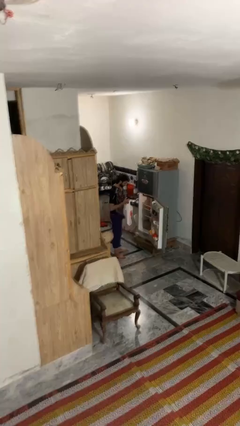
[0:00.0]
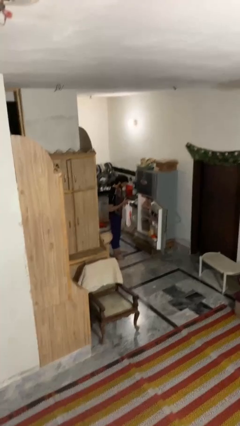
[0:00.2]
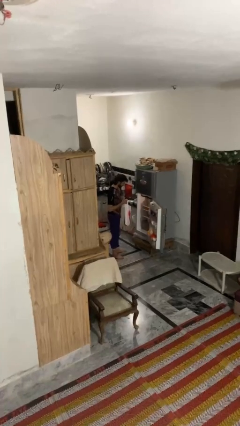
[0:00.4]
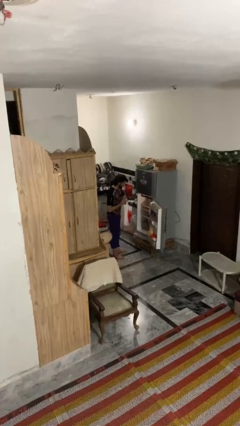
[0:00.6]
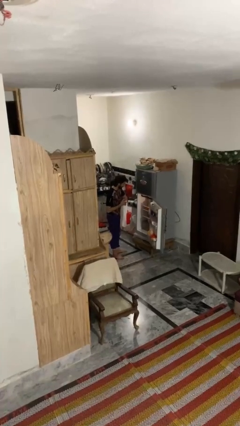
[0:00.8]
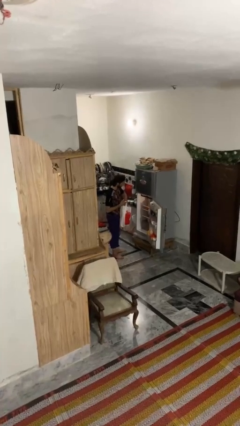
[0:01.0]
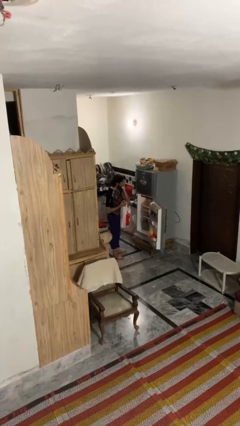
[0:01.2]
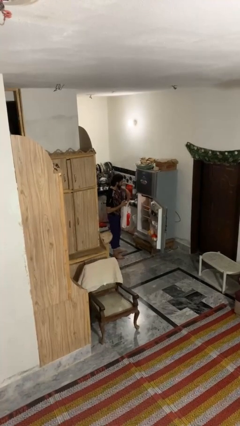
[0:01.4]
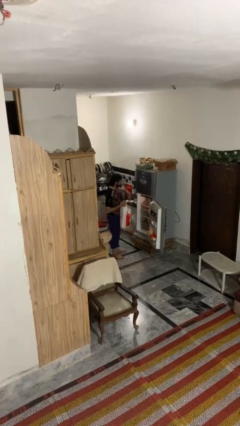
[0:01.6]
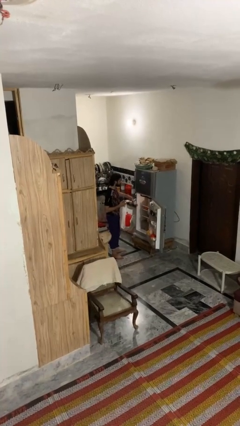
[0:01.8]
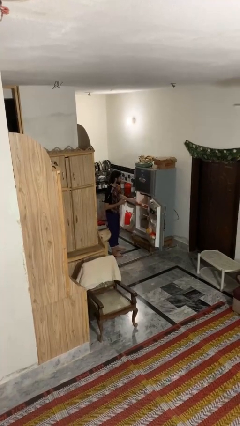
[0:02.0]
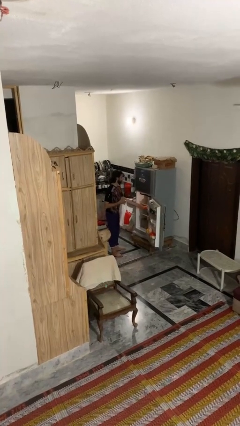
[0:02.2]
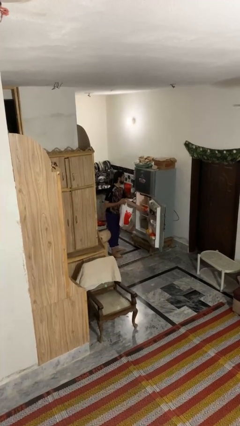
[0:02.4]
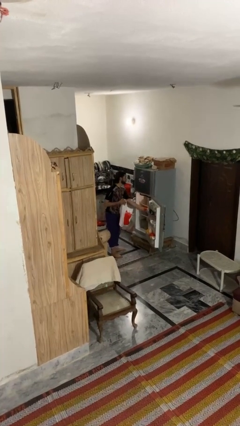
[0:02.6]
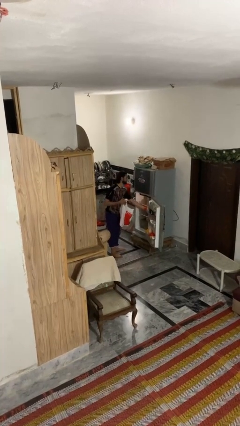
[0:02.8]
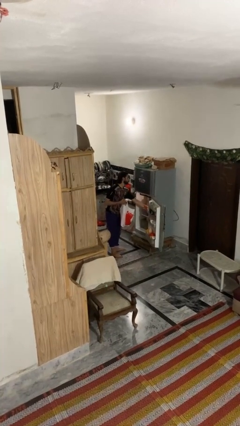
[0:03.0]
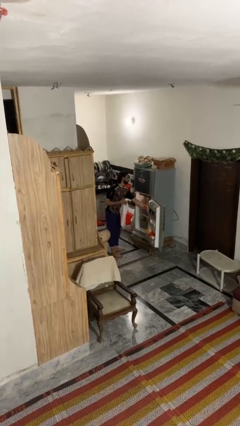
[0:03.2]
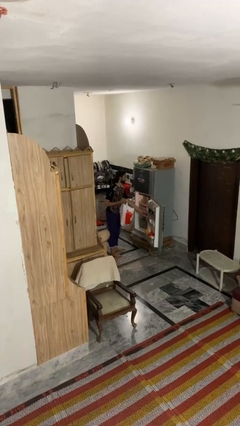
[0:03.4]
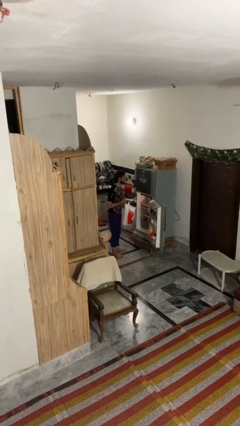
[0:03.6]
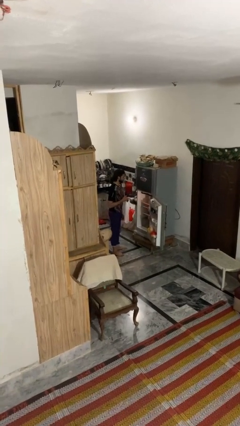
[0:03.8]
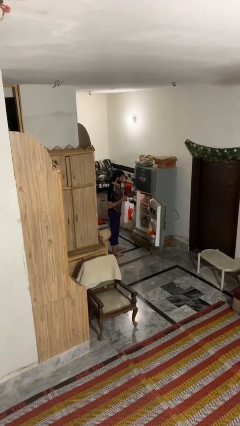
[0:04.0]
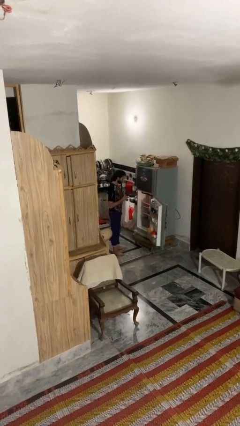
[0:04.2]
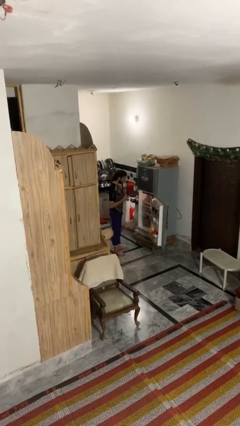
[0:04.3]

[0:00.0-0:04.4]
person loads groceries into refrigerator

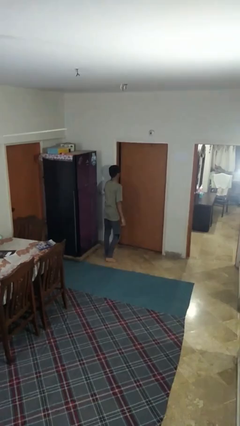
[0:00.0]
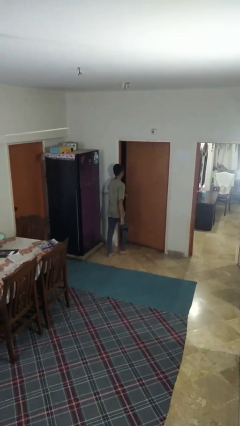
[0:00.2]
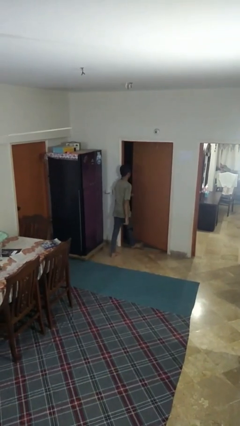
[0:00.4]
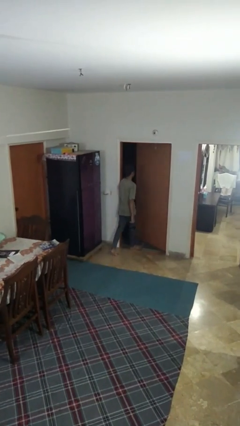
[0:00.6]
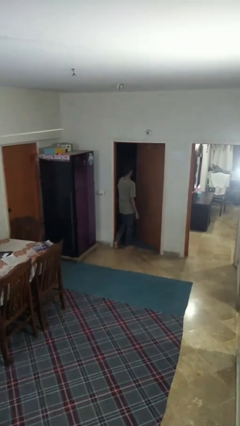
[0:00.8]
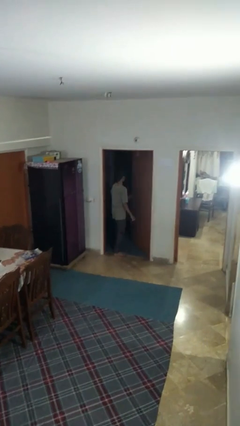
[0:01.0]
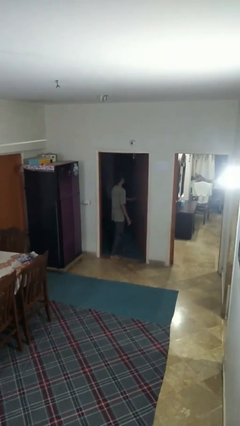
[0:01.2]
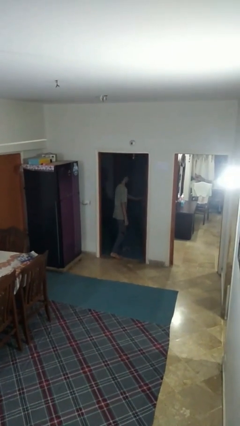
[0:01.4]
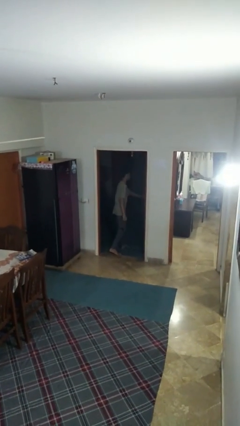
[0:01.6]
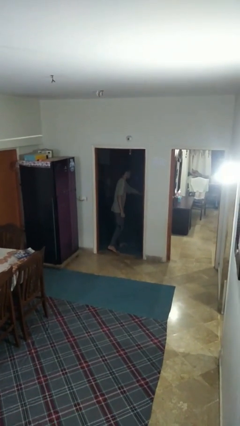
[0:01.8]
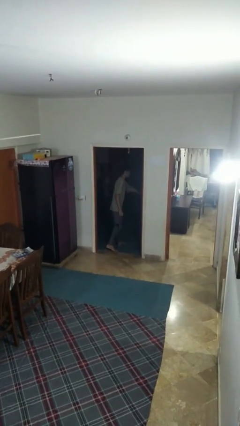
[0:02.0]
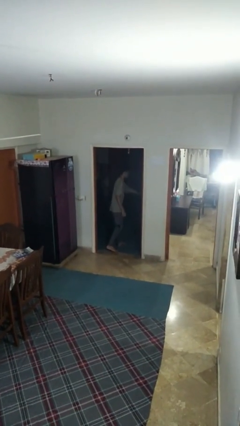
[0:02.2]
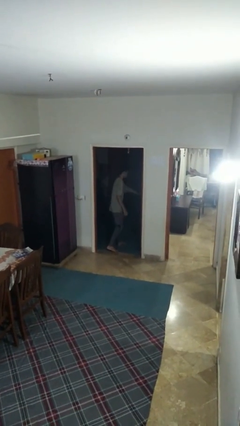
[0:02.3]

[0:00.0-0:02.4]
person opens facility door

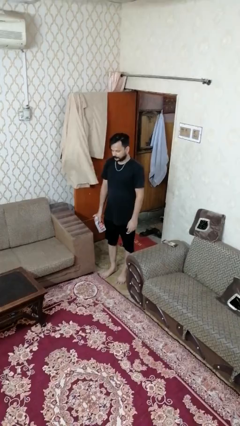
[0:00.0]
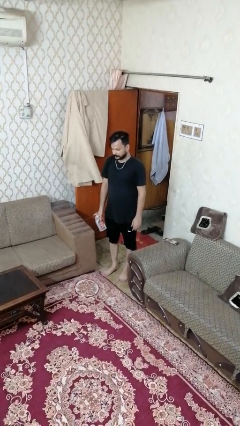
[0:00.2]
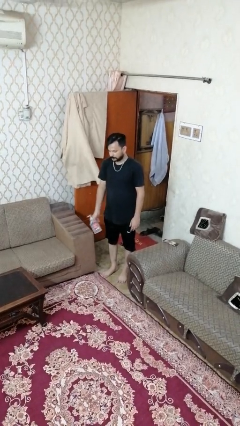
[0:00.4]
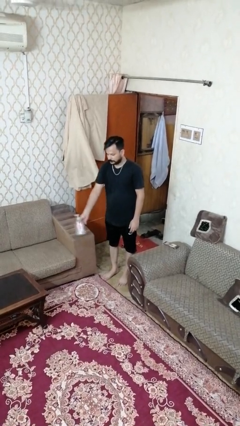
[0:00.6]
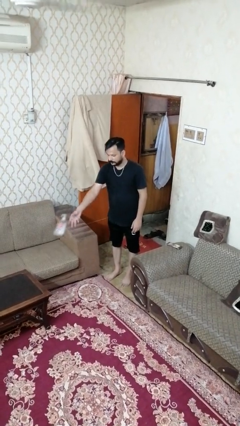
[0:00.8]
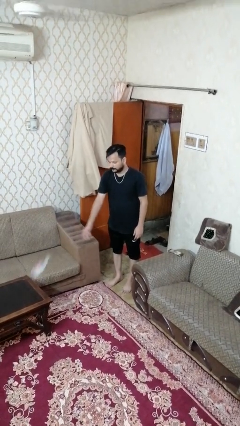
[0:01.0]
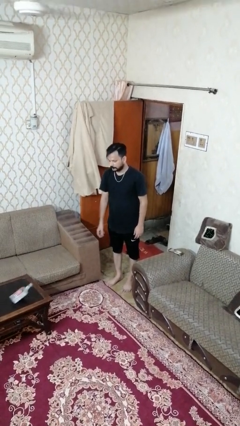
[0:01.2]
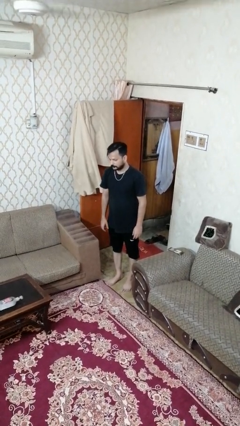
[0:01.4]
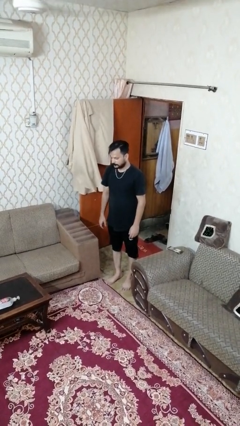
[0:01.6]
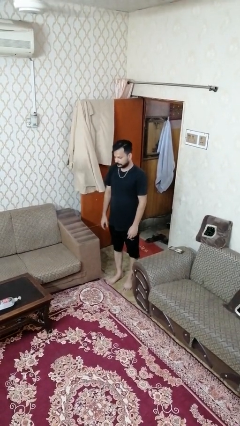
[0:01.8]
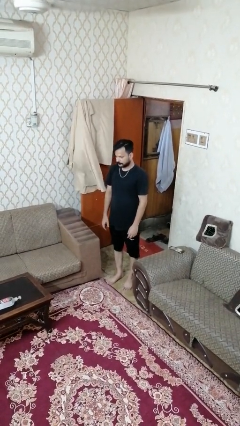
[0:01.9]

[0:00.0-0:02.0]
person throws object on table

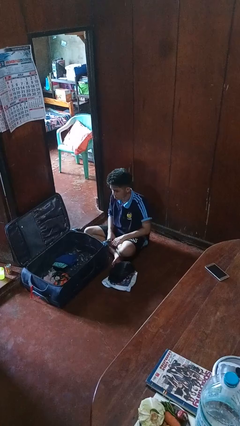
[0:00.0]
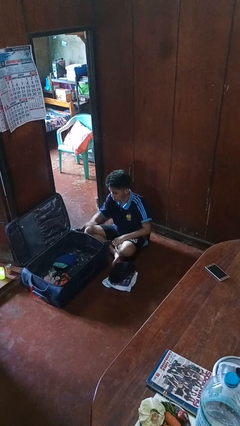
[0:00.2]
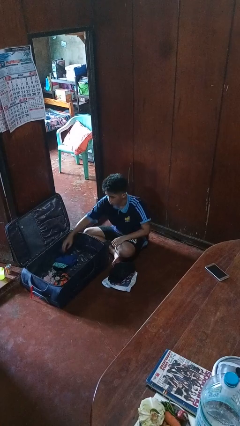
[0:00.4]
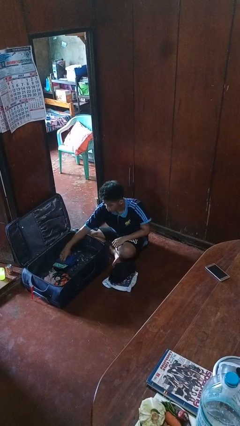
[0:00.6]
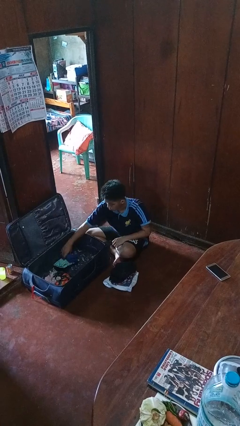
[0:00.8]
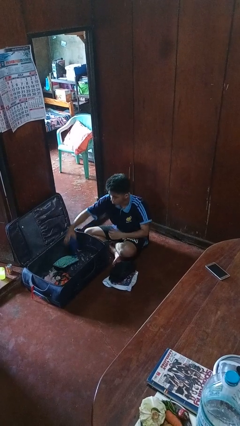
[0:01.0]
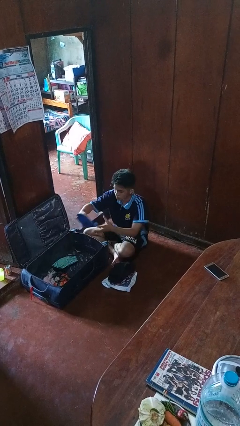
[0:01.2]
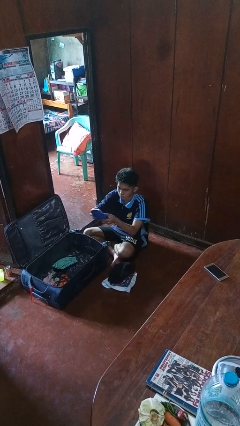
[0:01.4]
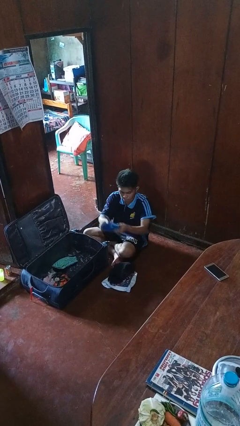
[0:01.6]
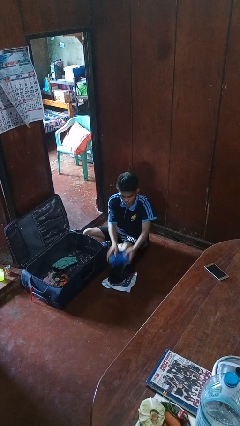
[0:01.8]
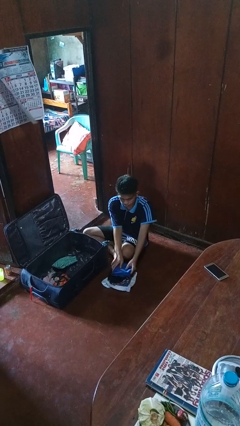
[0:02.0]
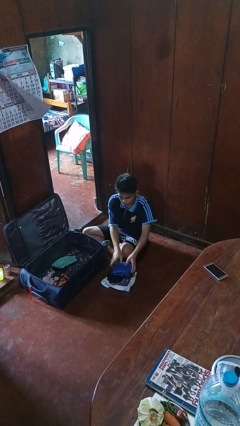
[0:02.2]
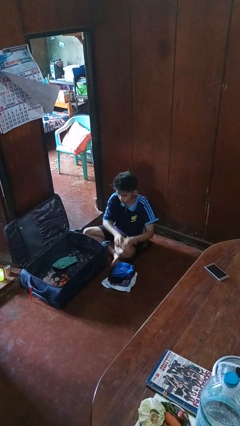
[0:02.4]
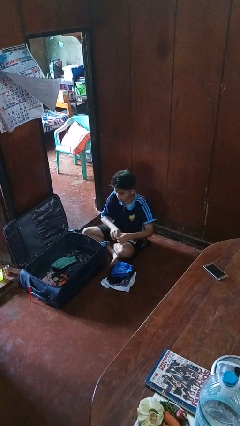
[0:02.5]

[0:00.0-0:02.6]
person unloads clothes from suitcase

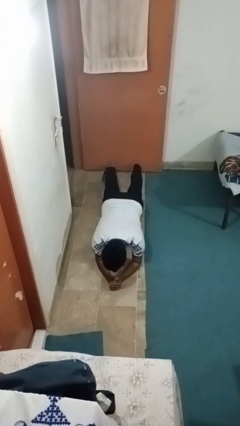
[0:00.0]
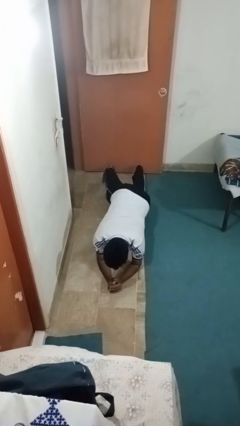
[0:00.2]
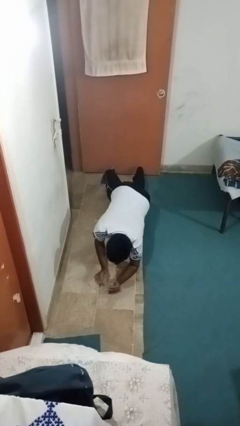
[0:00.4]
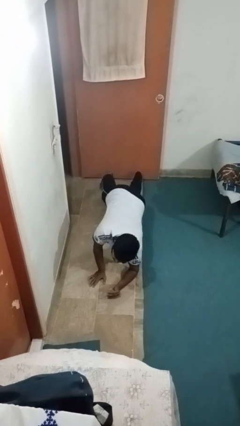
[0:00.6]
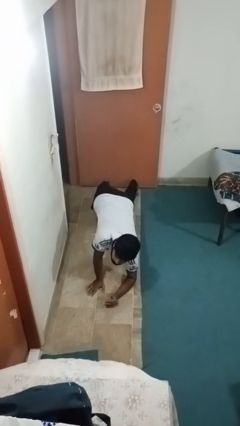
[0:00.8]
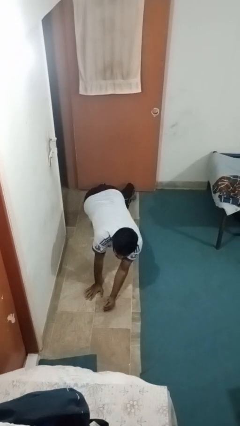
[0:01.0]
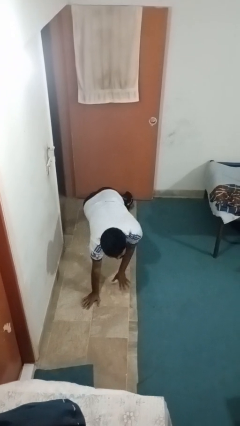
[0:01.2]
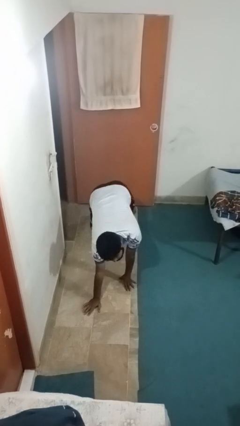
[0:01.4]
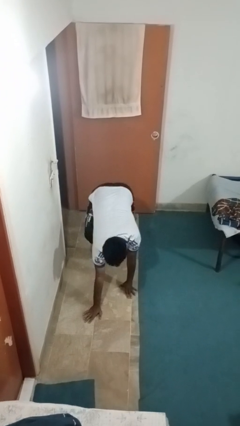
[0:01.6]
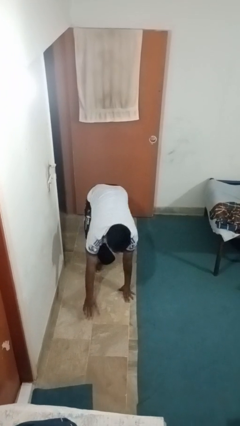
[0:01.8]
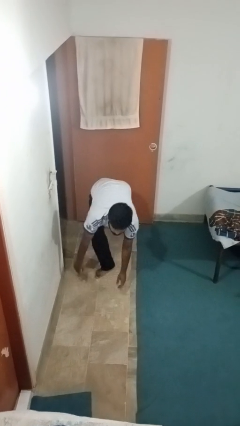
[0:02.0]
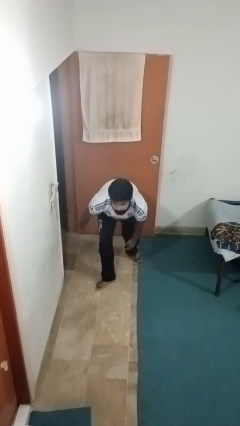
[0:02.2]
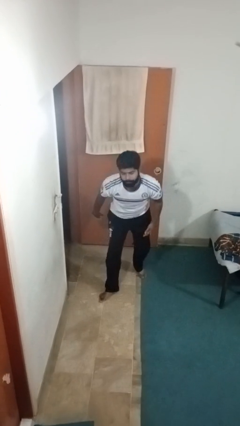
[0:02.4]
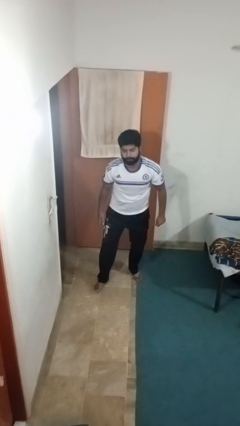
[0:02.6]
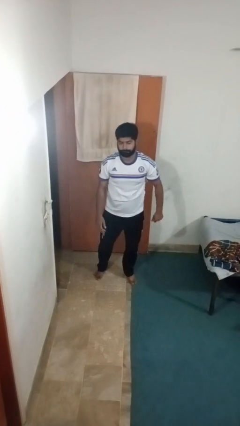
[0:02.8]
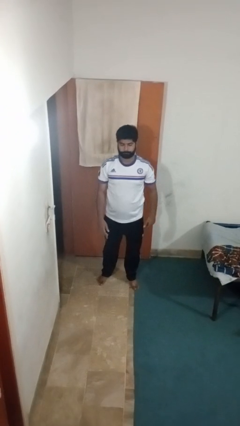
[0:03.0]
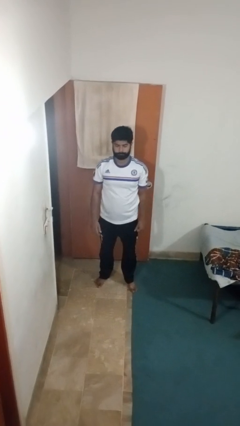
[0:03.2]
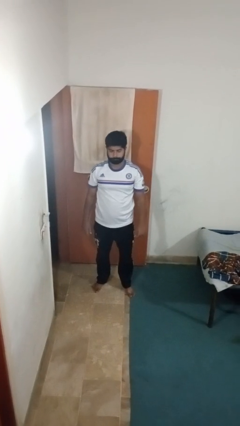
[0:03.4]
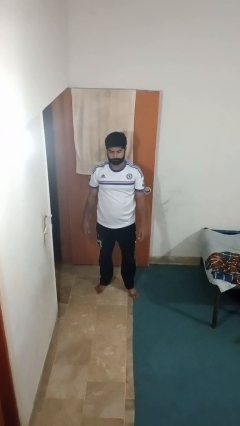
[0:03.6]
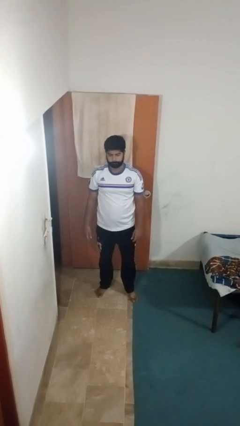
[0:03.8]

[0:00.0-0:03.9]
person stands up from floor

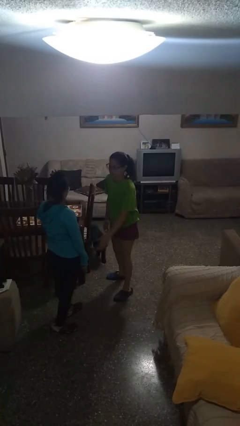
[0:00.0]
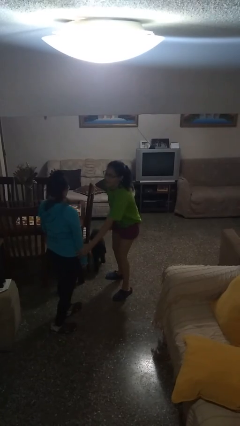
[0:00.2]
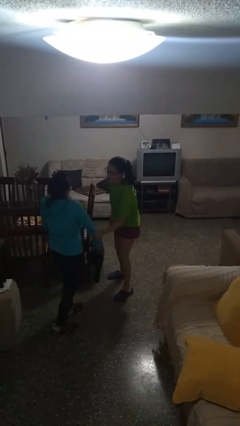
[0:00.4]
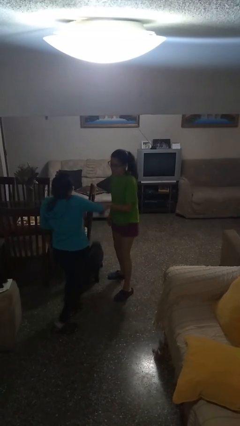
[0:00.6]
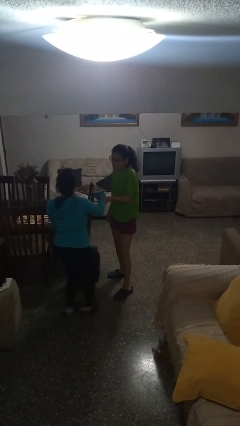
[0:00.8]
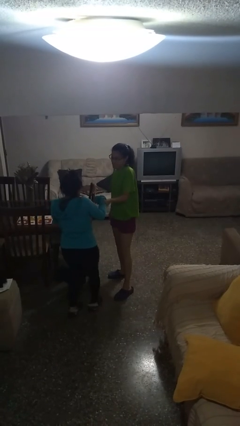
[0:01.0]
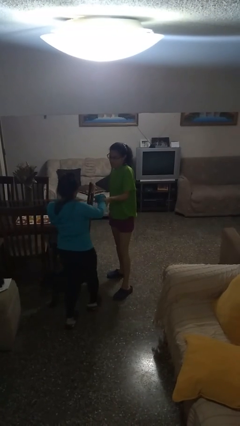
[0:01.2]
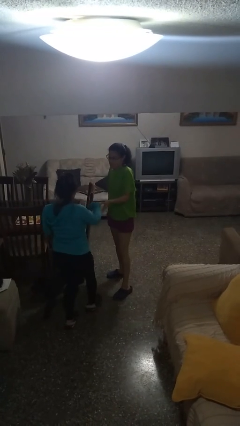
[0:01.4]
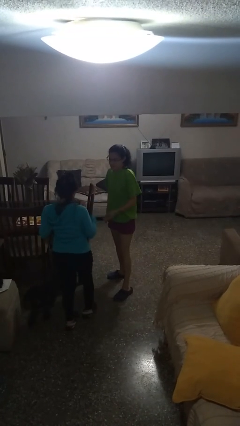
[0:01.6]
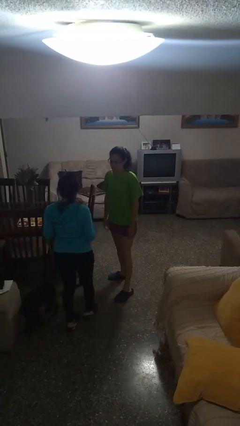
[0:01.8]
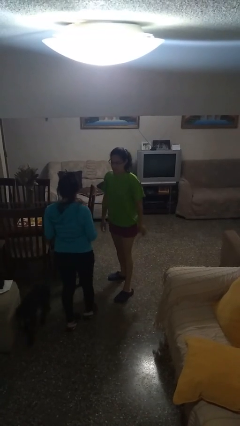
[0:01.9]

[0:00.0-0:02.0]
person grabs person by forearm

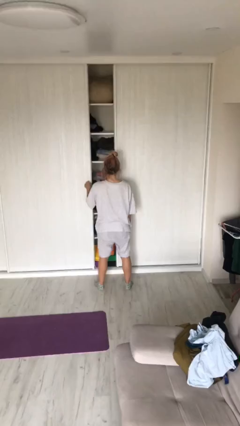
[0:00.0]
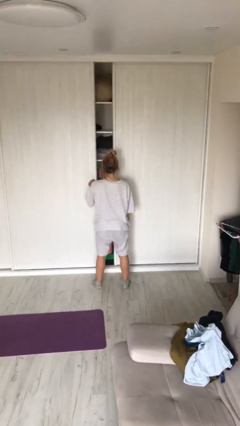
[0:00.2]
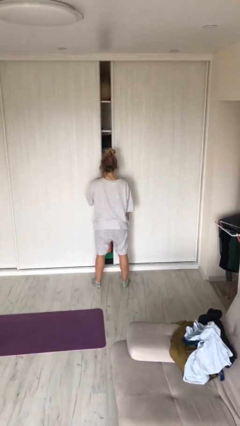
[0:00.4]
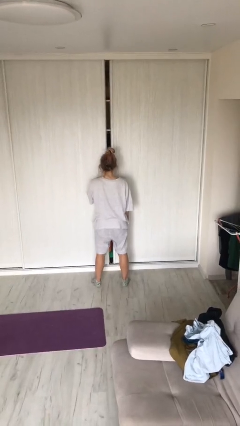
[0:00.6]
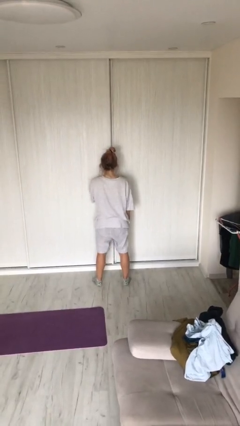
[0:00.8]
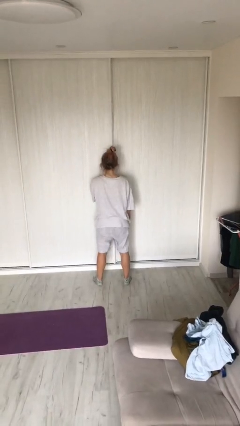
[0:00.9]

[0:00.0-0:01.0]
person closes sliding door
